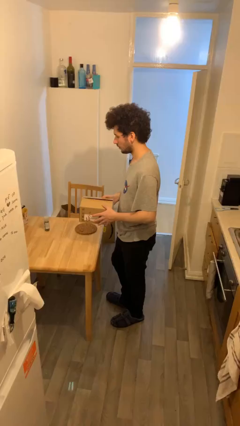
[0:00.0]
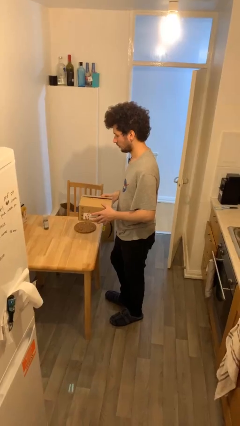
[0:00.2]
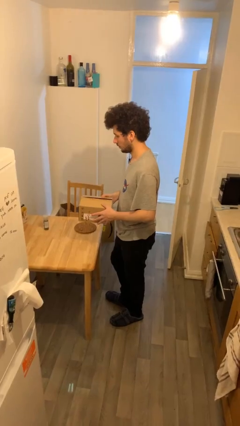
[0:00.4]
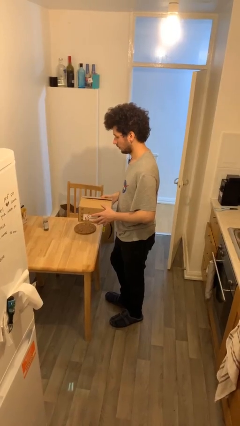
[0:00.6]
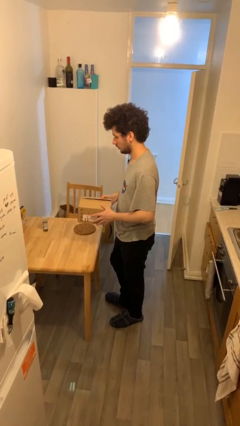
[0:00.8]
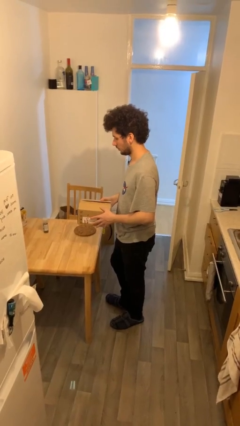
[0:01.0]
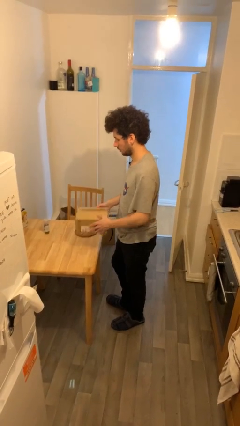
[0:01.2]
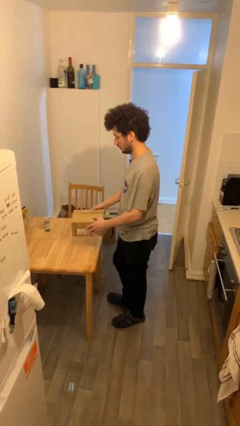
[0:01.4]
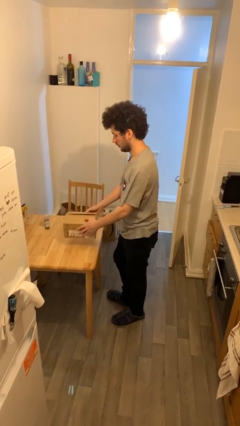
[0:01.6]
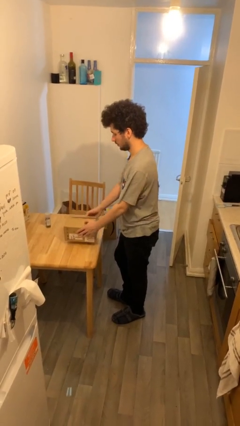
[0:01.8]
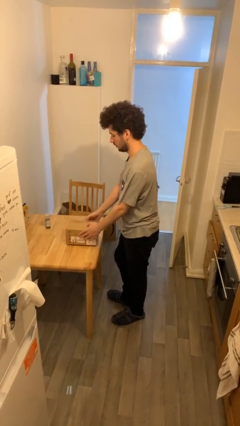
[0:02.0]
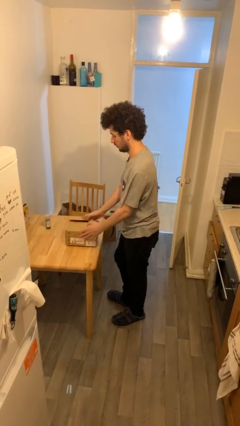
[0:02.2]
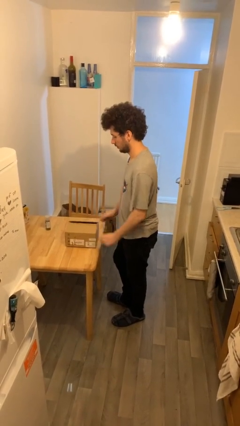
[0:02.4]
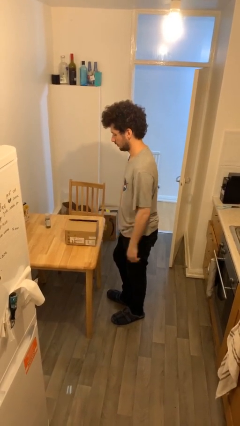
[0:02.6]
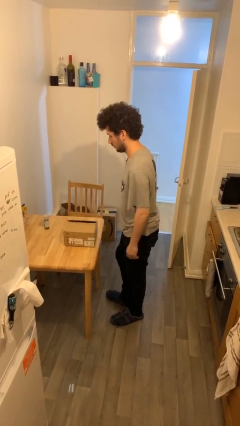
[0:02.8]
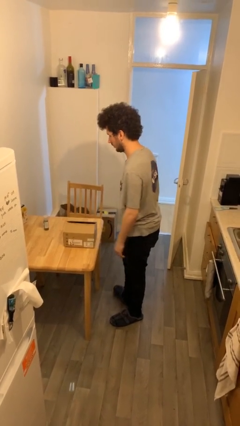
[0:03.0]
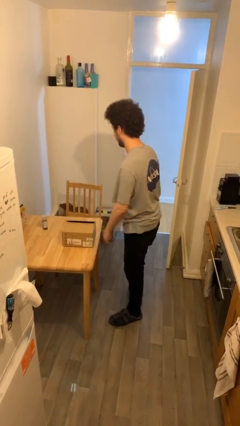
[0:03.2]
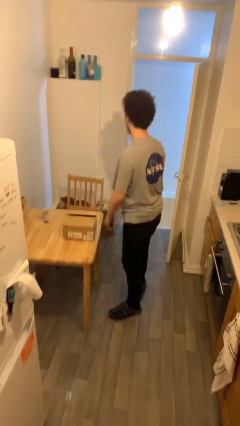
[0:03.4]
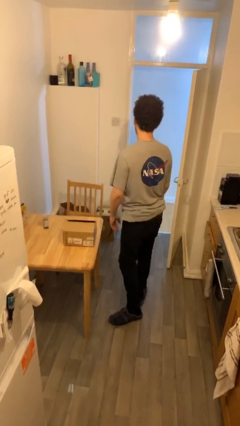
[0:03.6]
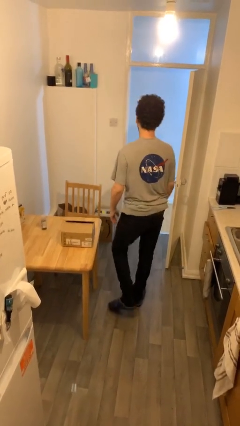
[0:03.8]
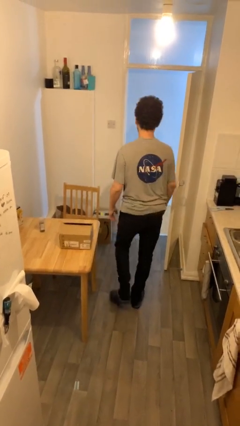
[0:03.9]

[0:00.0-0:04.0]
person puts down object on table

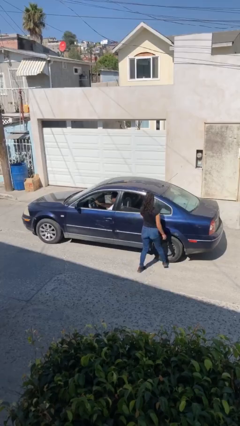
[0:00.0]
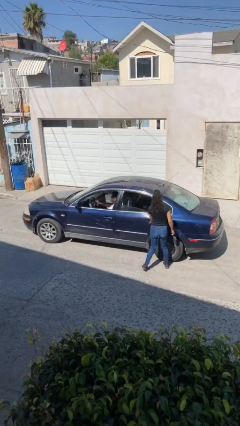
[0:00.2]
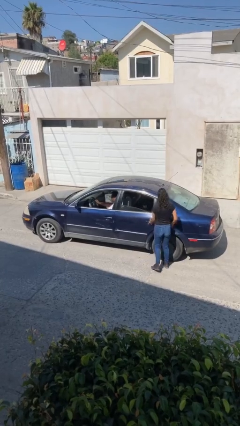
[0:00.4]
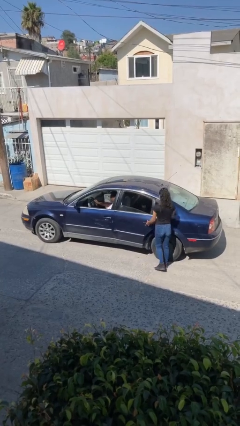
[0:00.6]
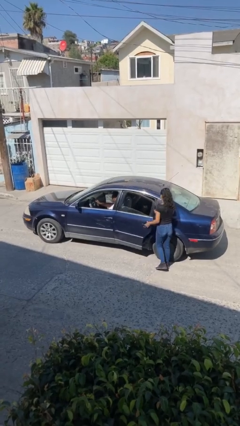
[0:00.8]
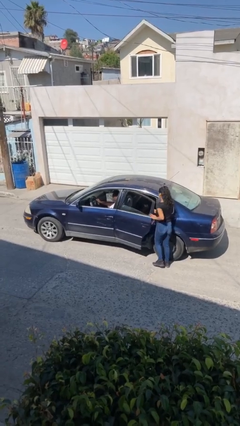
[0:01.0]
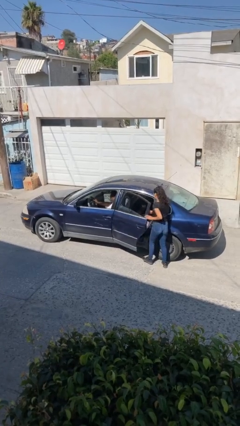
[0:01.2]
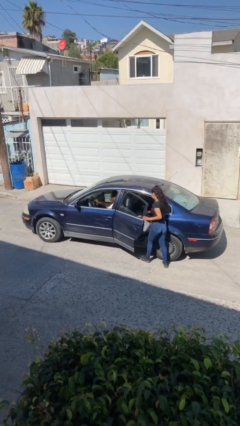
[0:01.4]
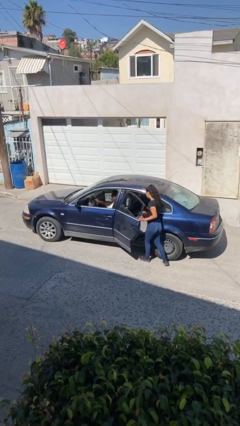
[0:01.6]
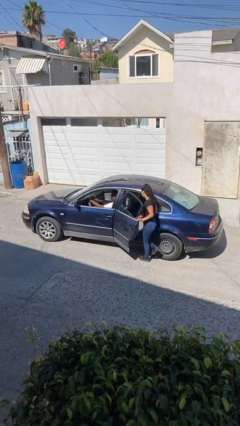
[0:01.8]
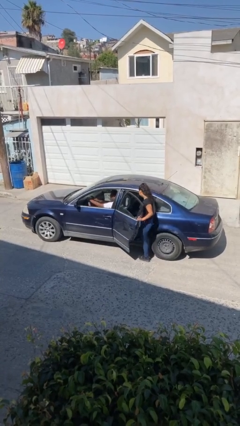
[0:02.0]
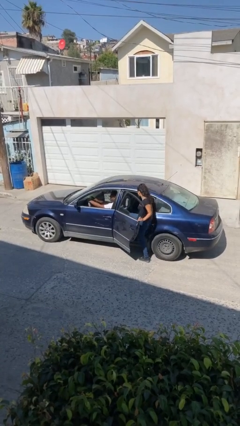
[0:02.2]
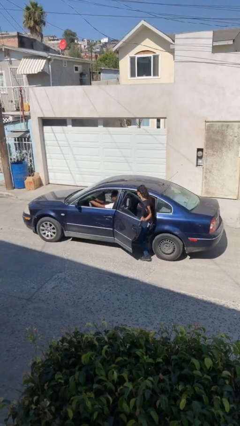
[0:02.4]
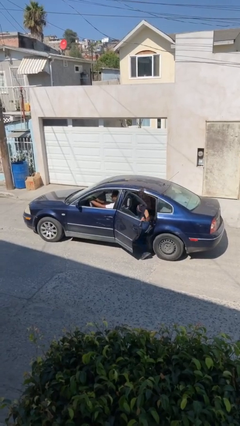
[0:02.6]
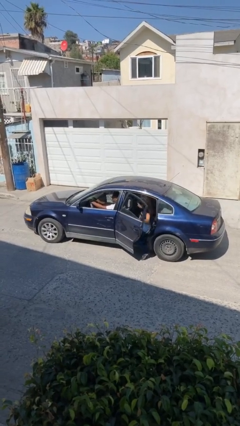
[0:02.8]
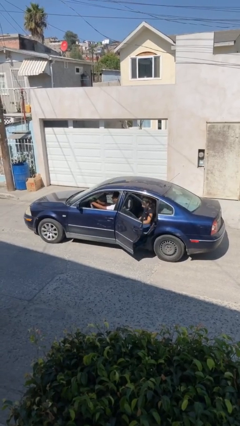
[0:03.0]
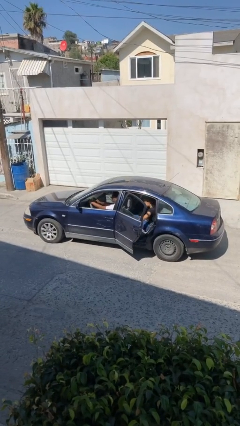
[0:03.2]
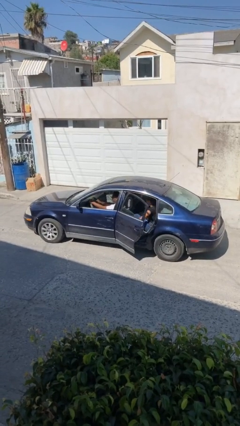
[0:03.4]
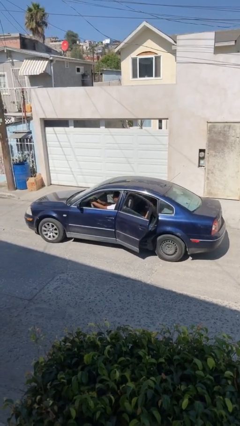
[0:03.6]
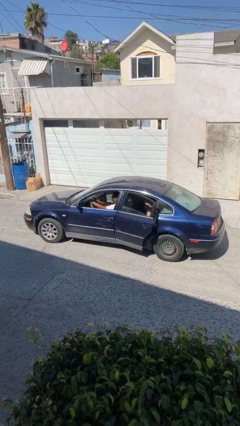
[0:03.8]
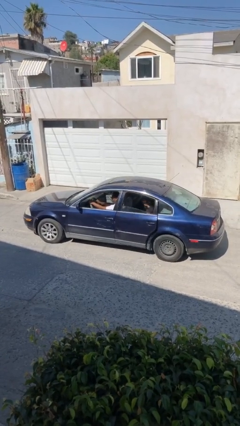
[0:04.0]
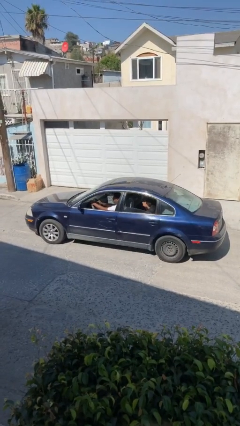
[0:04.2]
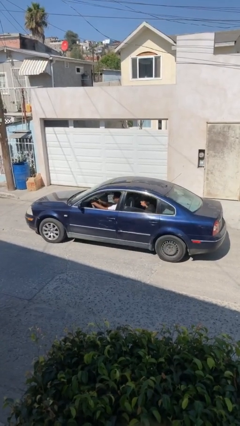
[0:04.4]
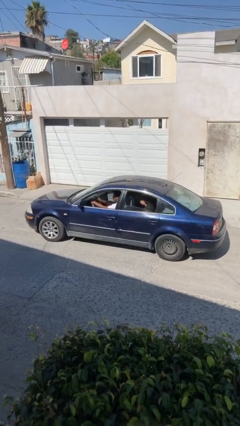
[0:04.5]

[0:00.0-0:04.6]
car picks up person

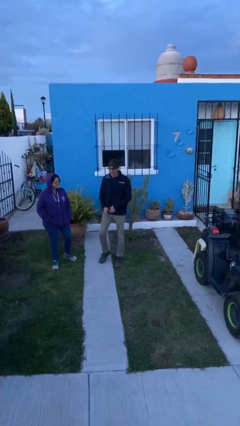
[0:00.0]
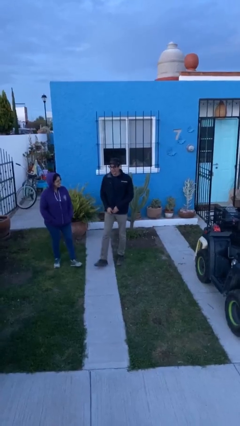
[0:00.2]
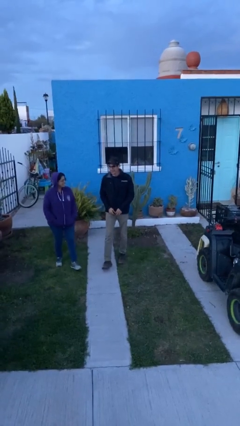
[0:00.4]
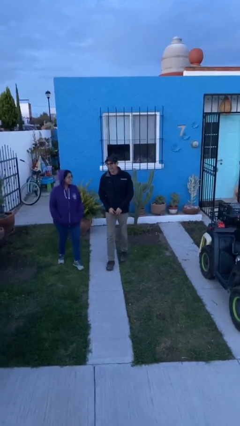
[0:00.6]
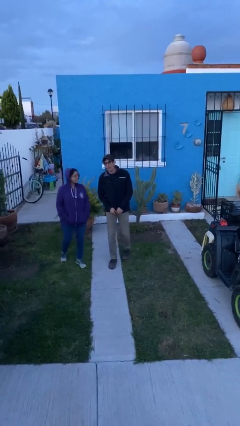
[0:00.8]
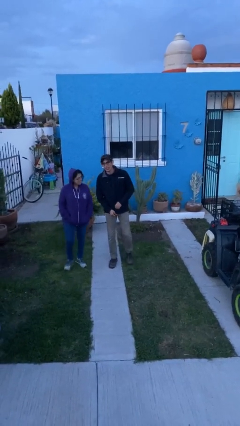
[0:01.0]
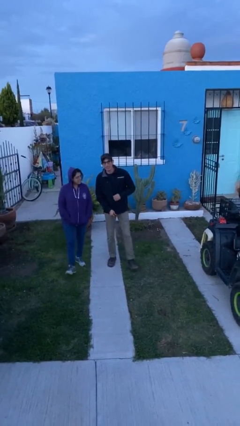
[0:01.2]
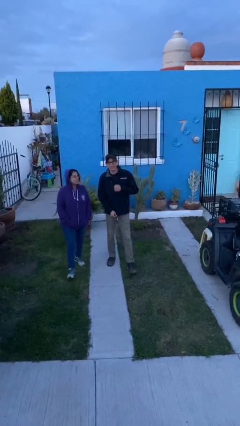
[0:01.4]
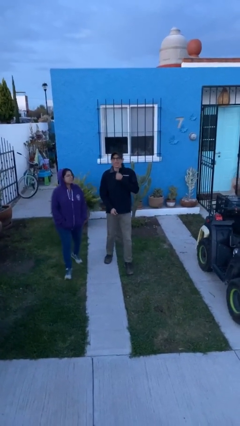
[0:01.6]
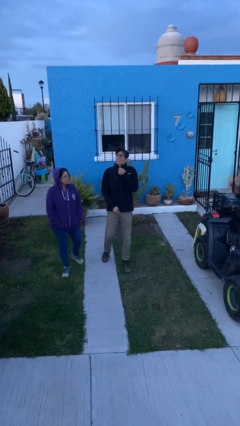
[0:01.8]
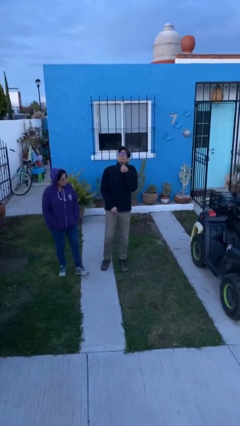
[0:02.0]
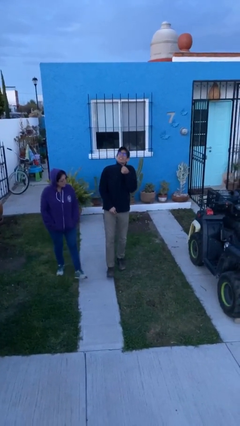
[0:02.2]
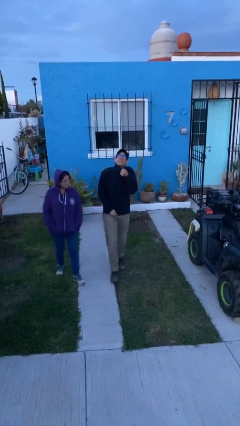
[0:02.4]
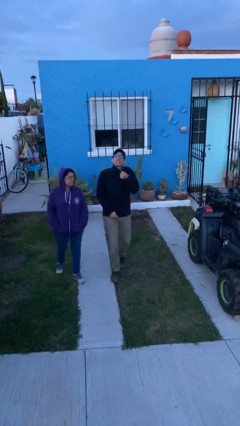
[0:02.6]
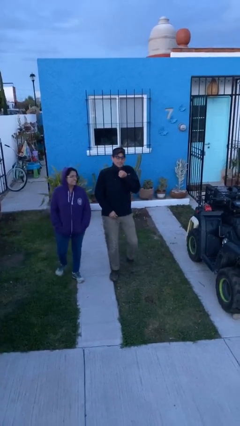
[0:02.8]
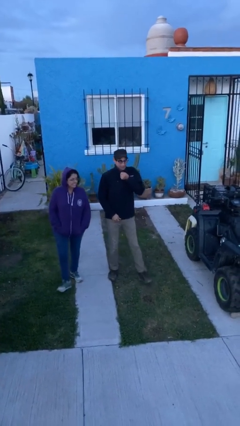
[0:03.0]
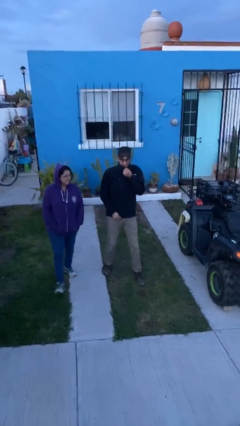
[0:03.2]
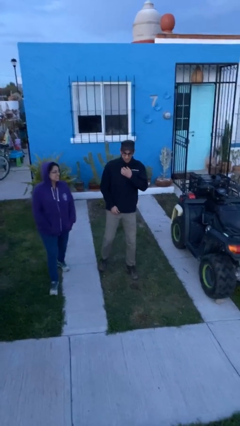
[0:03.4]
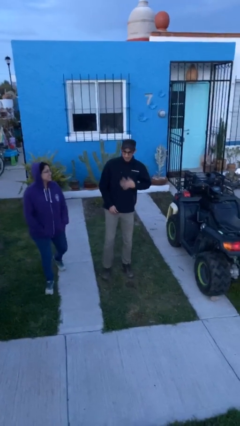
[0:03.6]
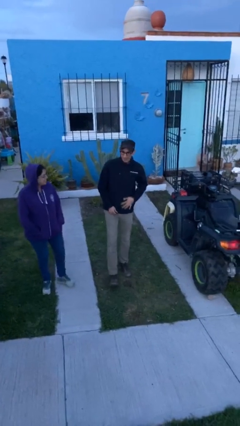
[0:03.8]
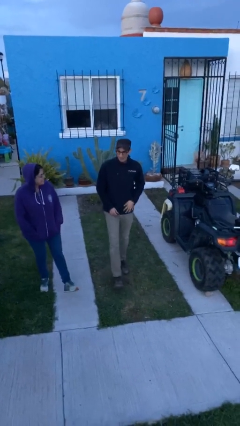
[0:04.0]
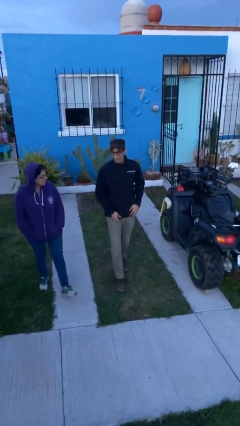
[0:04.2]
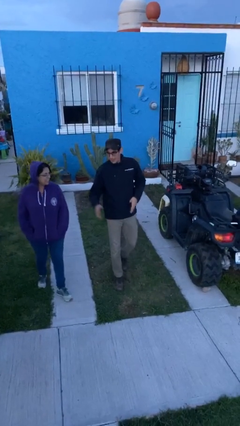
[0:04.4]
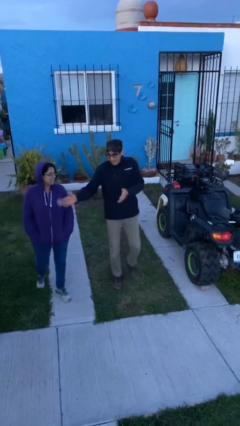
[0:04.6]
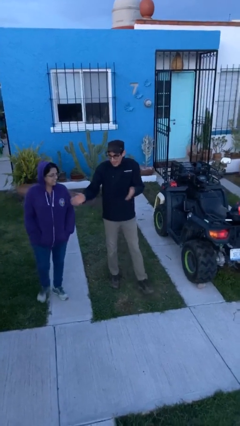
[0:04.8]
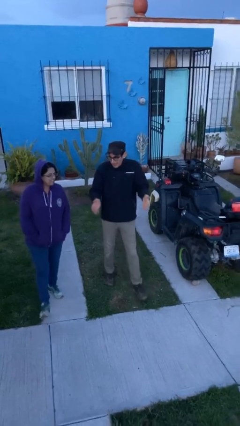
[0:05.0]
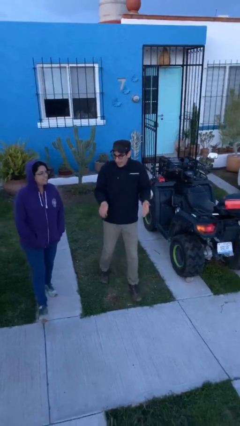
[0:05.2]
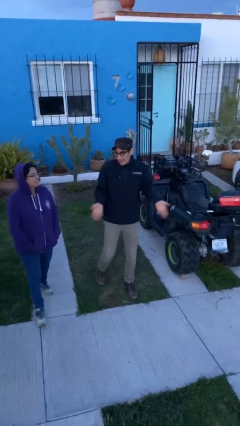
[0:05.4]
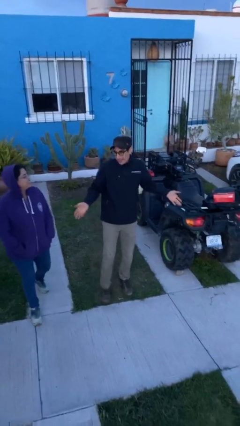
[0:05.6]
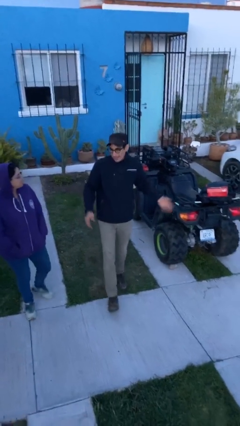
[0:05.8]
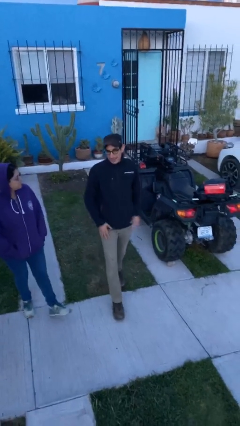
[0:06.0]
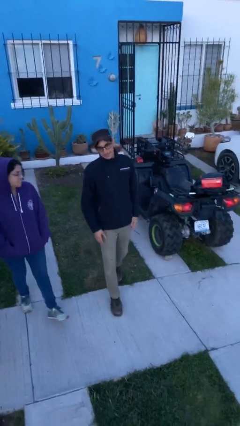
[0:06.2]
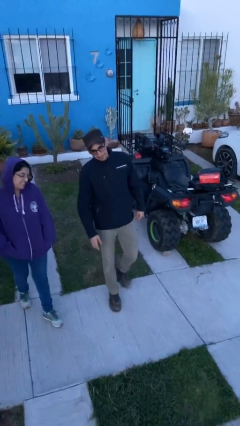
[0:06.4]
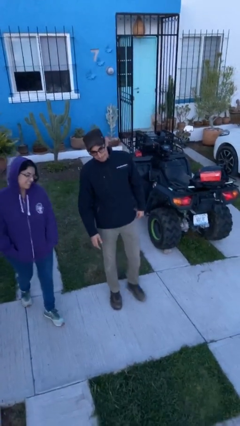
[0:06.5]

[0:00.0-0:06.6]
person talks to person

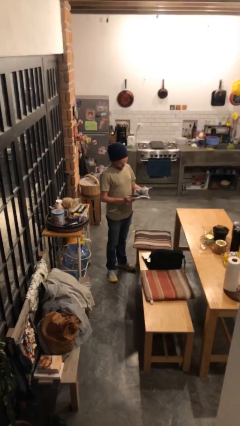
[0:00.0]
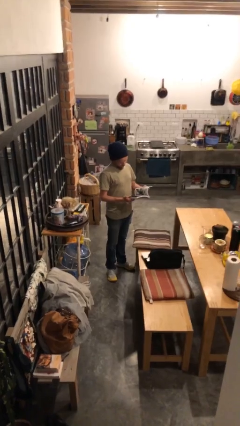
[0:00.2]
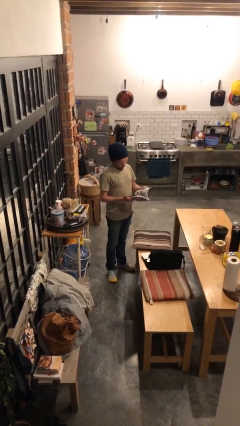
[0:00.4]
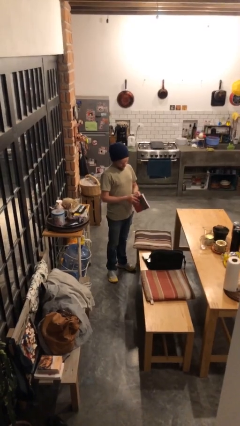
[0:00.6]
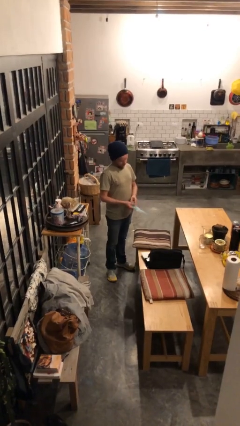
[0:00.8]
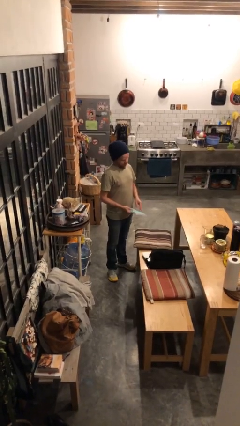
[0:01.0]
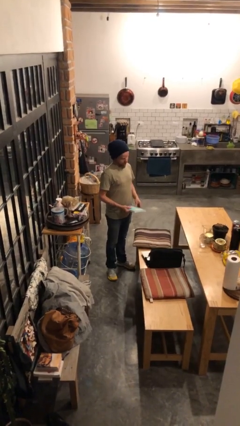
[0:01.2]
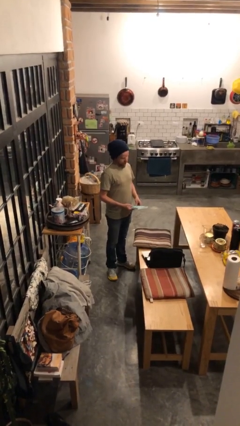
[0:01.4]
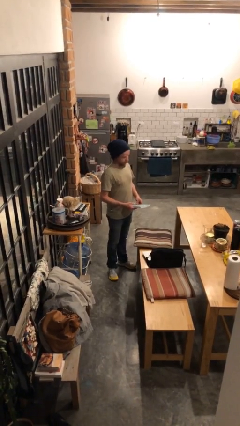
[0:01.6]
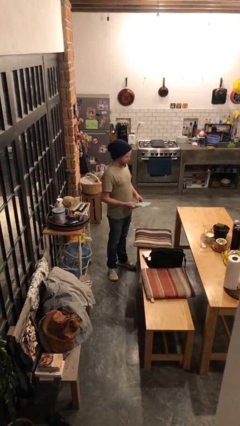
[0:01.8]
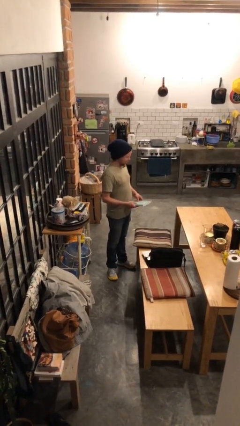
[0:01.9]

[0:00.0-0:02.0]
person reads document

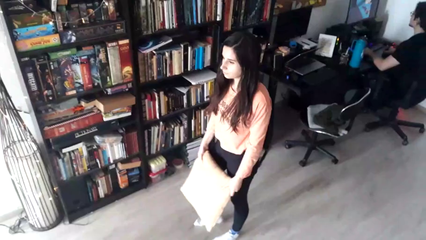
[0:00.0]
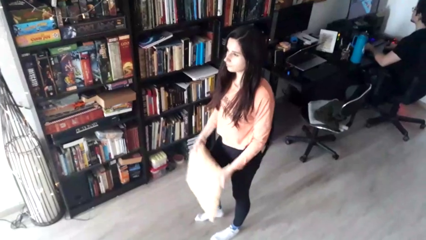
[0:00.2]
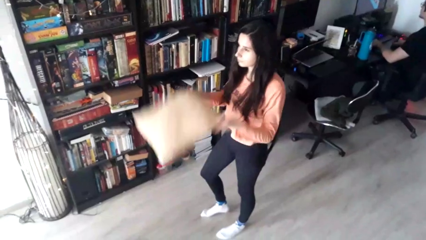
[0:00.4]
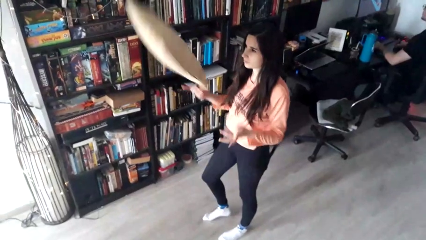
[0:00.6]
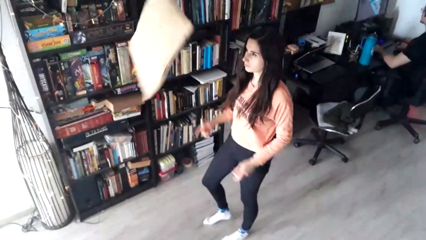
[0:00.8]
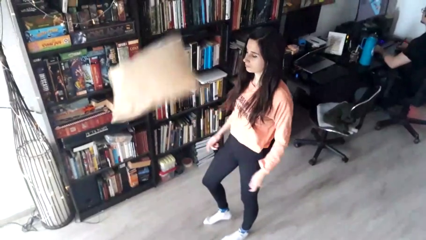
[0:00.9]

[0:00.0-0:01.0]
person throws object into air
